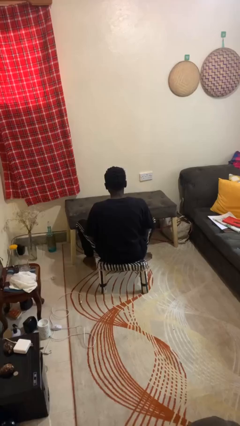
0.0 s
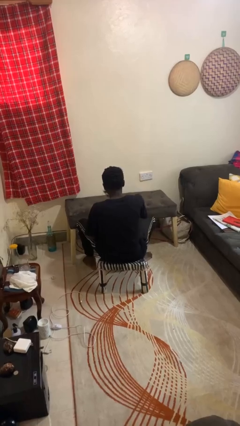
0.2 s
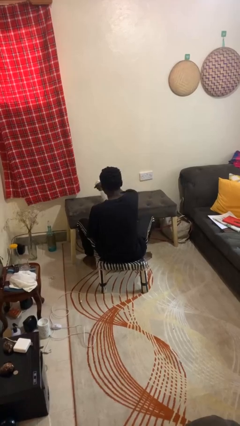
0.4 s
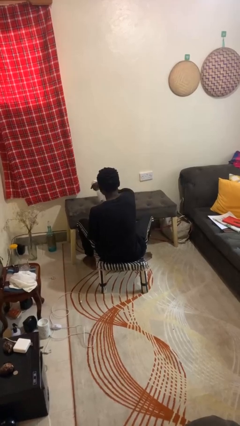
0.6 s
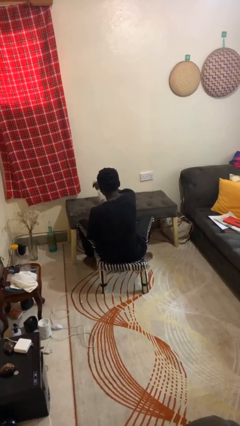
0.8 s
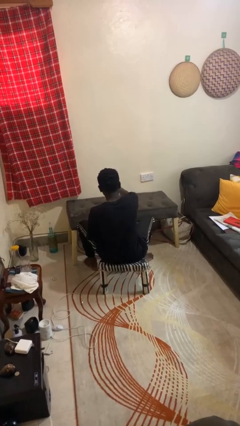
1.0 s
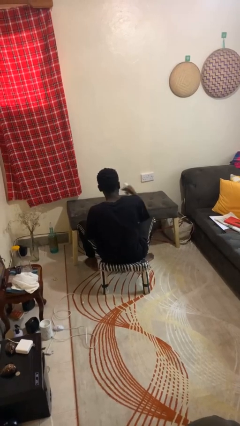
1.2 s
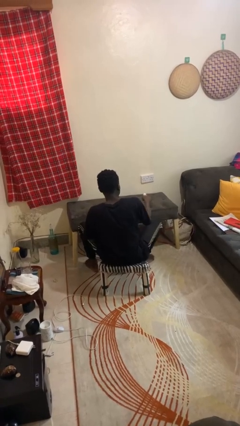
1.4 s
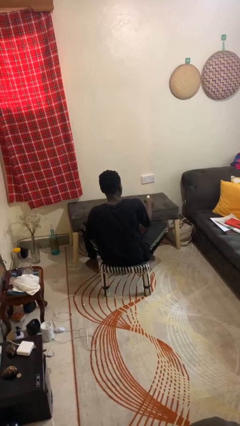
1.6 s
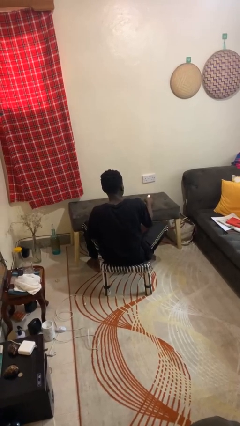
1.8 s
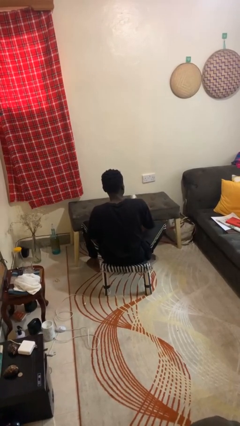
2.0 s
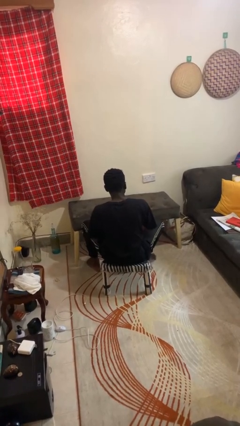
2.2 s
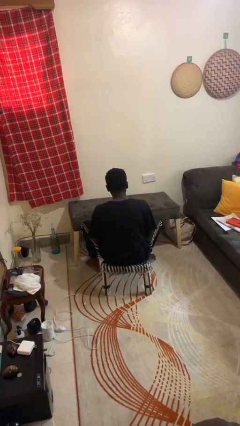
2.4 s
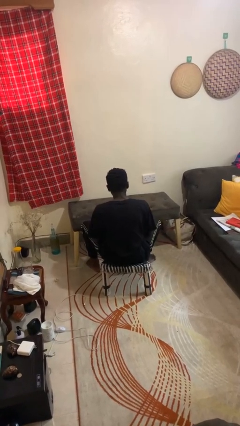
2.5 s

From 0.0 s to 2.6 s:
person sprays from bottle

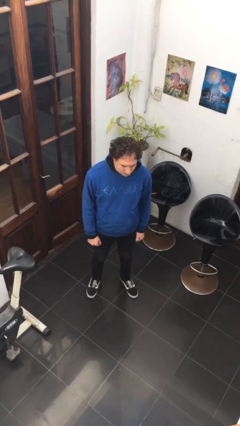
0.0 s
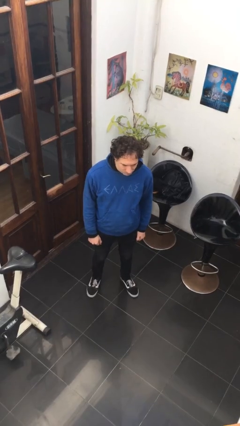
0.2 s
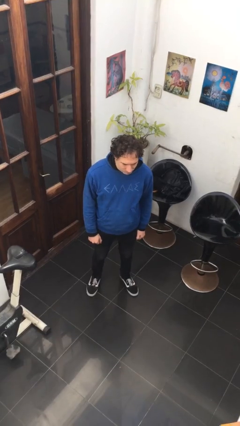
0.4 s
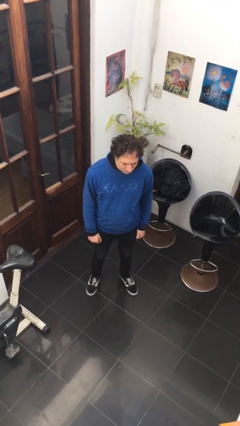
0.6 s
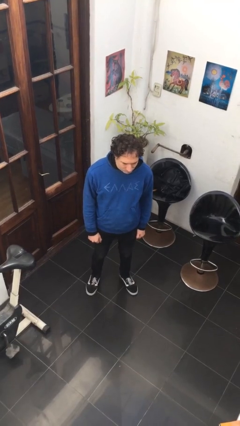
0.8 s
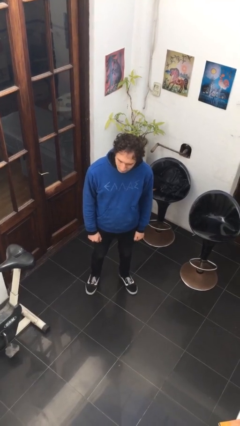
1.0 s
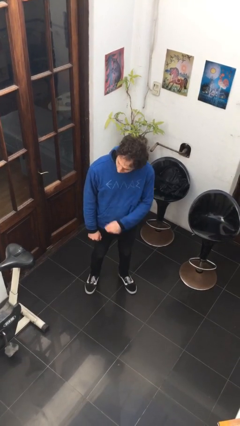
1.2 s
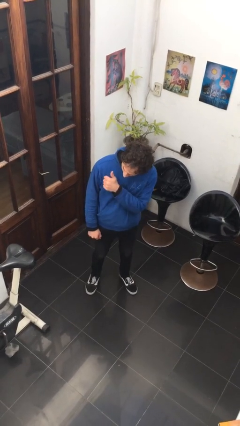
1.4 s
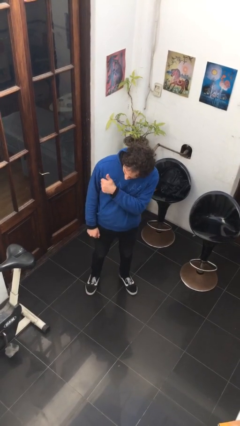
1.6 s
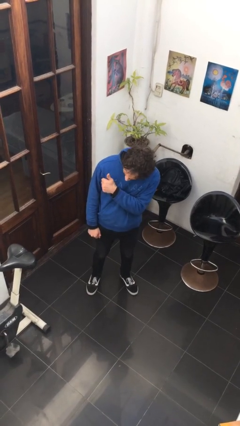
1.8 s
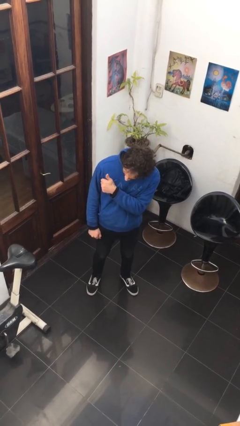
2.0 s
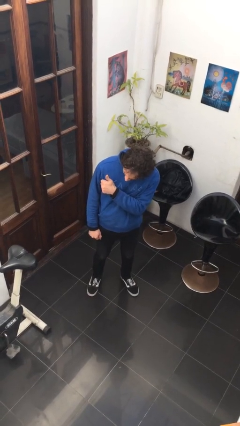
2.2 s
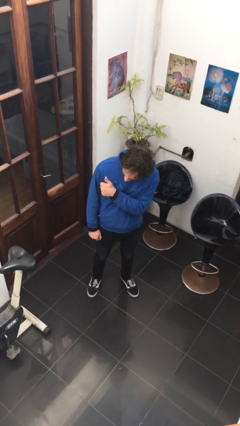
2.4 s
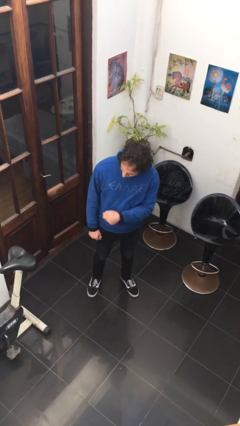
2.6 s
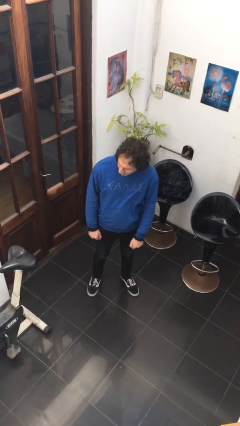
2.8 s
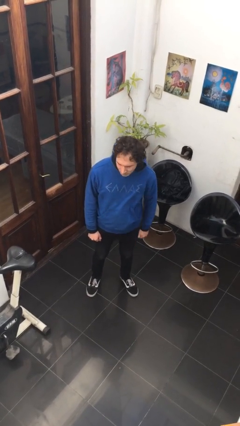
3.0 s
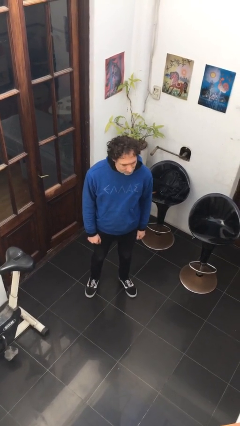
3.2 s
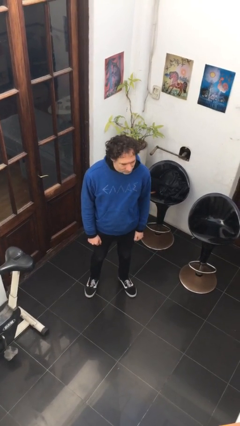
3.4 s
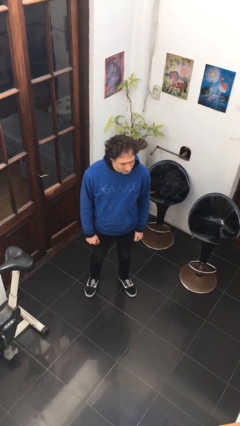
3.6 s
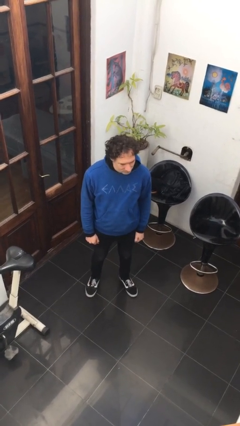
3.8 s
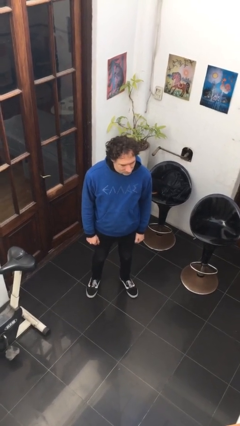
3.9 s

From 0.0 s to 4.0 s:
person gestures thumbs up

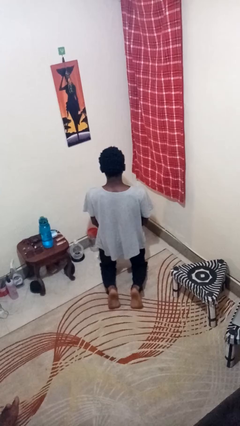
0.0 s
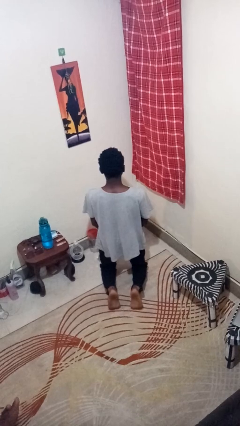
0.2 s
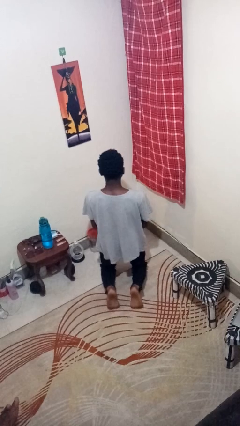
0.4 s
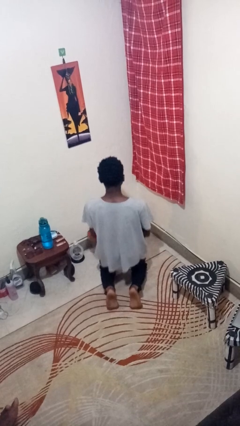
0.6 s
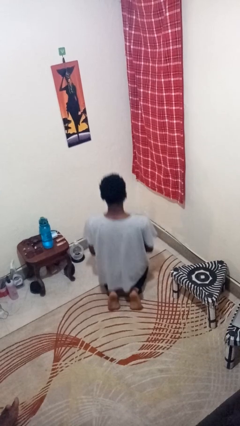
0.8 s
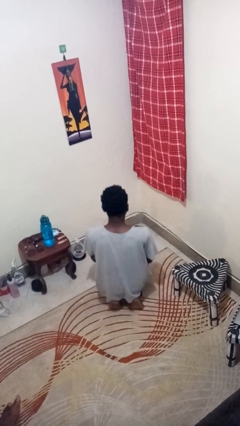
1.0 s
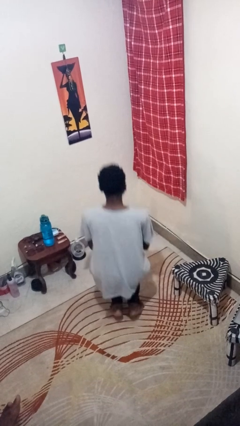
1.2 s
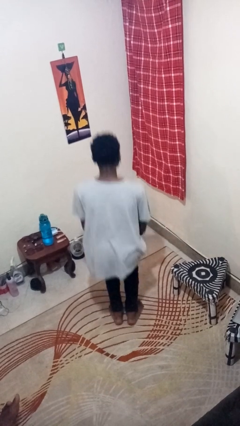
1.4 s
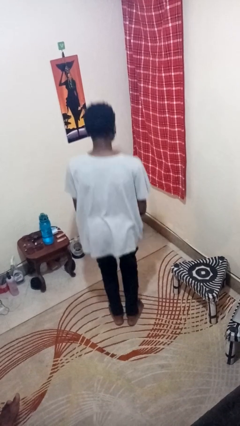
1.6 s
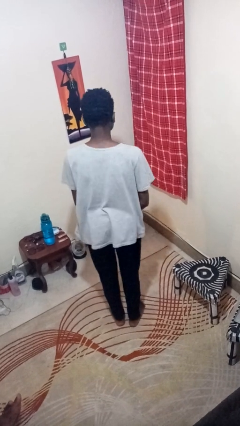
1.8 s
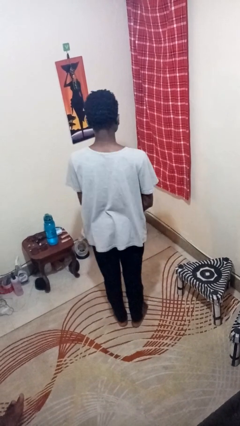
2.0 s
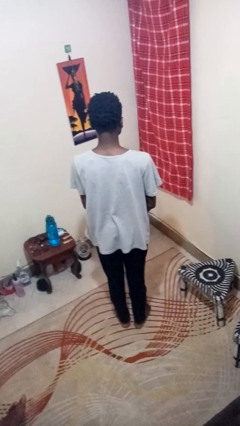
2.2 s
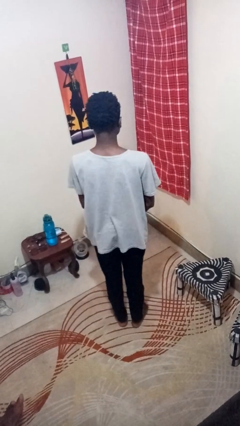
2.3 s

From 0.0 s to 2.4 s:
person stands up from floor

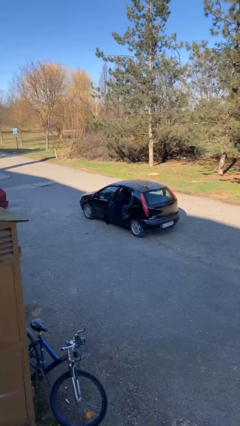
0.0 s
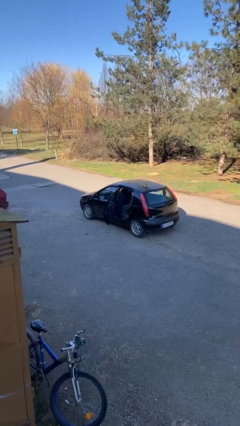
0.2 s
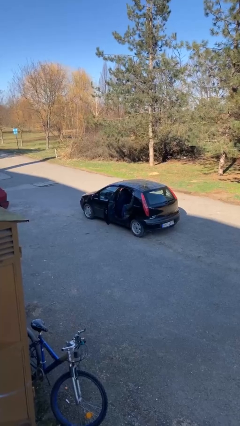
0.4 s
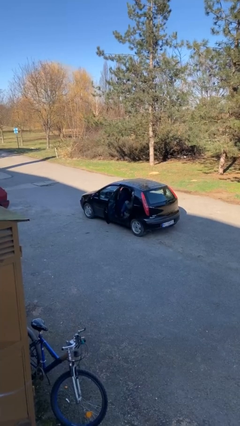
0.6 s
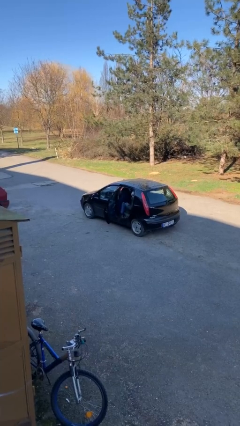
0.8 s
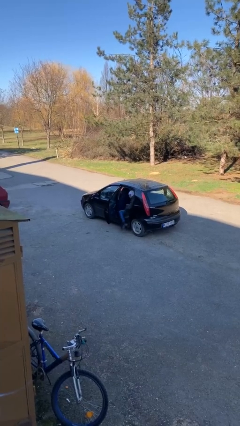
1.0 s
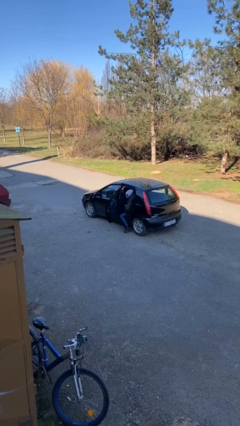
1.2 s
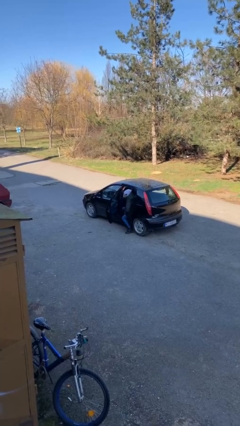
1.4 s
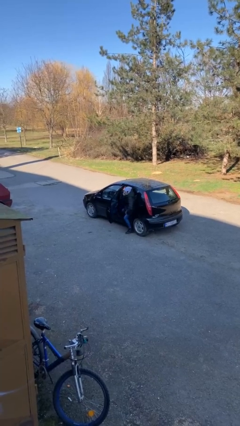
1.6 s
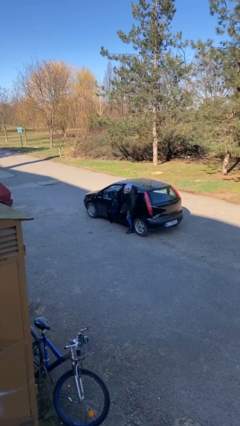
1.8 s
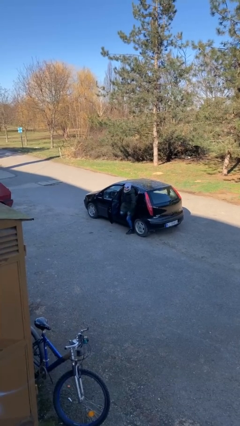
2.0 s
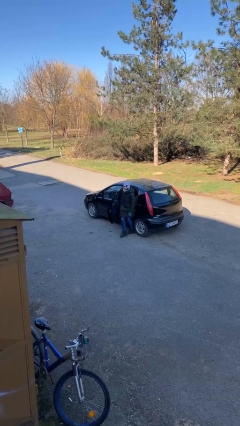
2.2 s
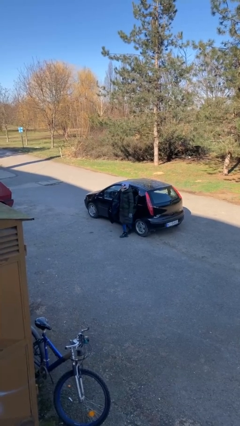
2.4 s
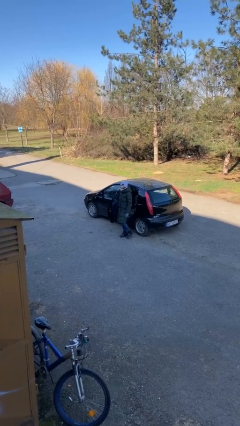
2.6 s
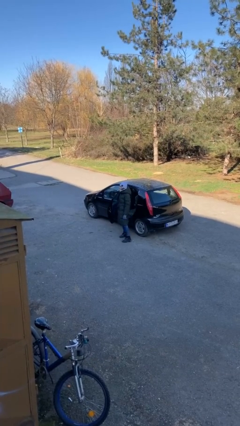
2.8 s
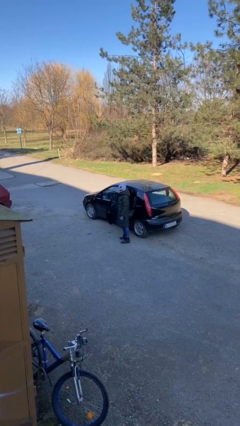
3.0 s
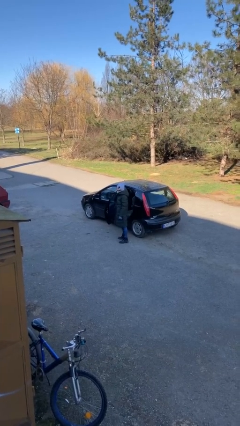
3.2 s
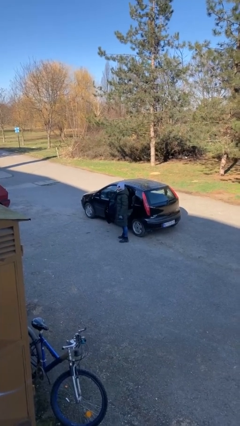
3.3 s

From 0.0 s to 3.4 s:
person exits car

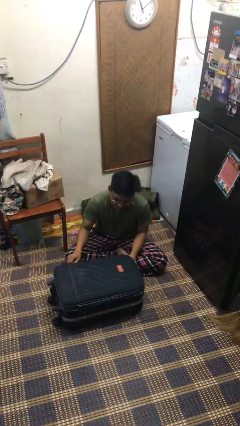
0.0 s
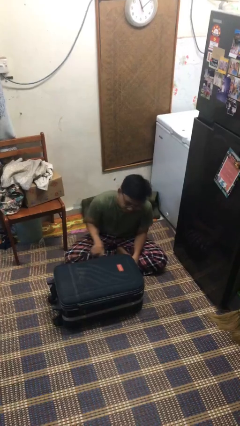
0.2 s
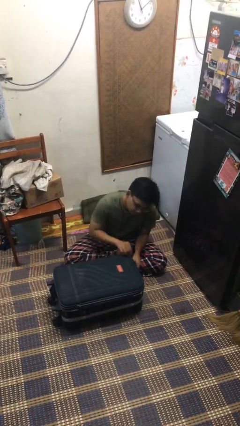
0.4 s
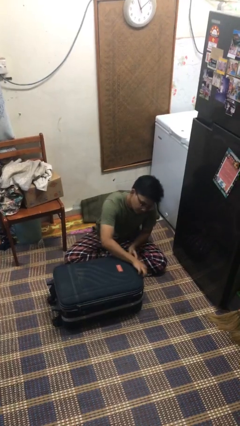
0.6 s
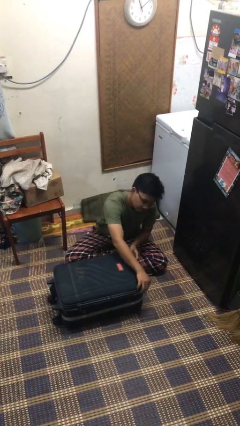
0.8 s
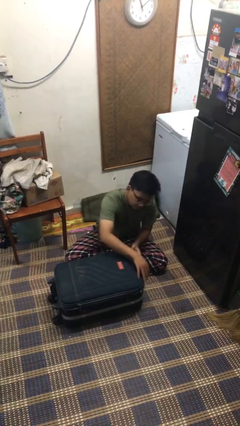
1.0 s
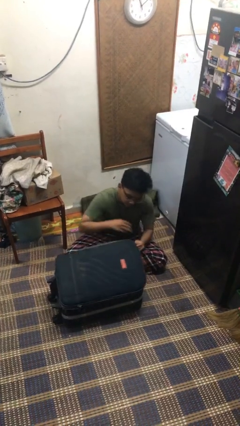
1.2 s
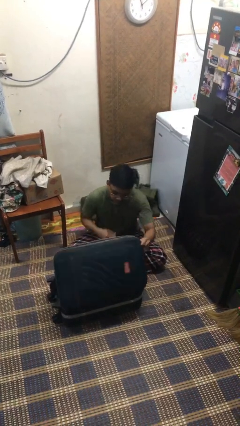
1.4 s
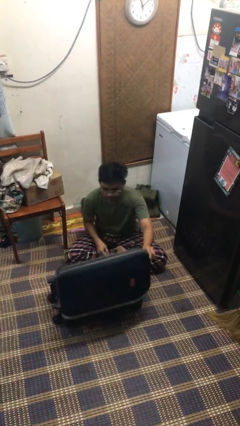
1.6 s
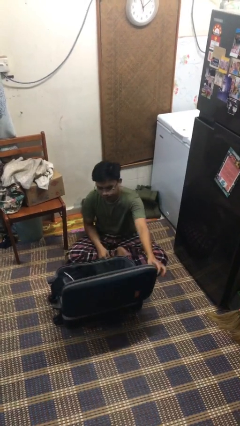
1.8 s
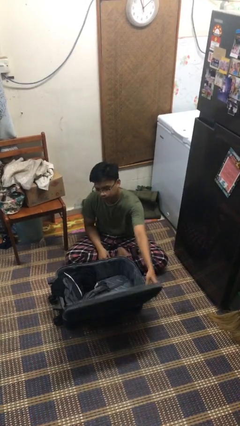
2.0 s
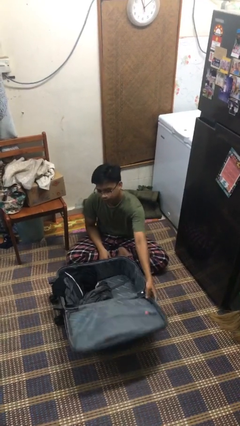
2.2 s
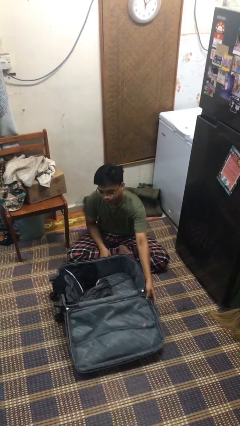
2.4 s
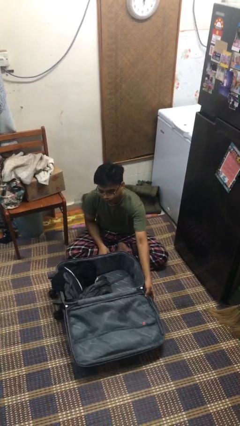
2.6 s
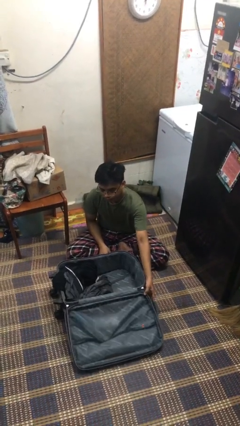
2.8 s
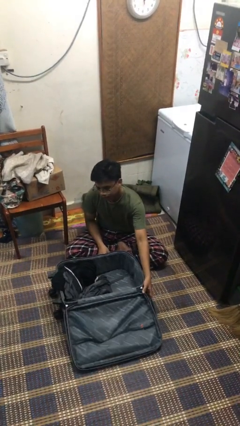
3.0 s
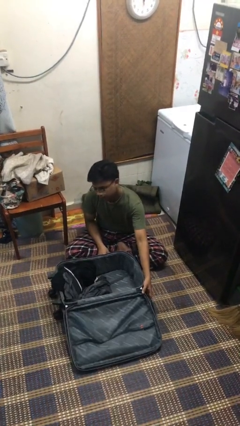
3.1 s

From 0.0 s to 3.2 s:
person opens suitcase

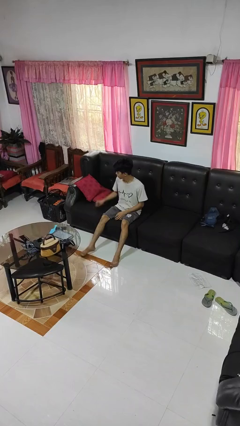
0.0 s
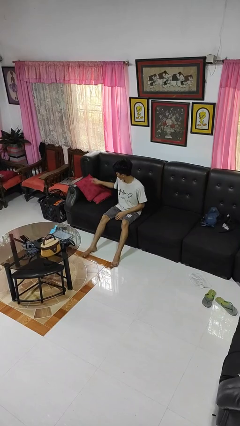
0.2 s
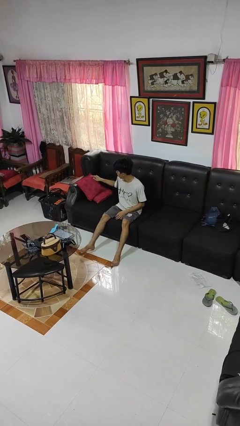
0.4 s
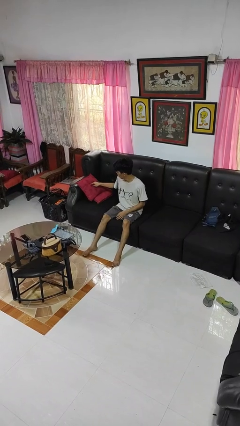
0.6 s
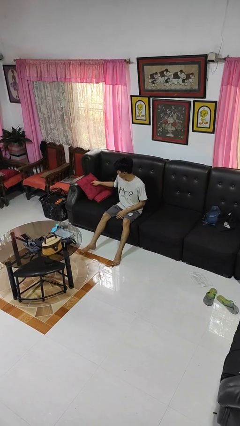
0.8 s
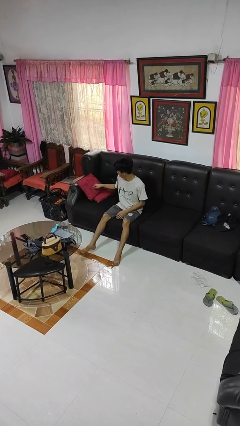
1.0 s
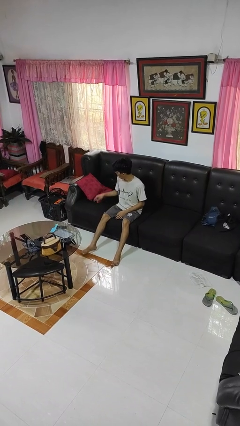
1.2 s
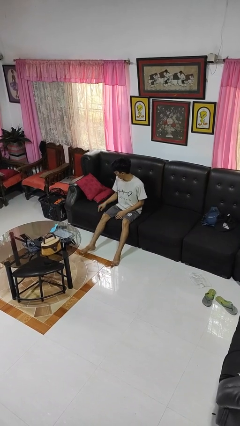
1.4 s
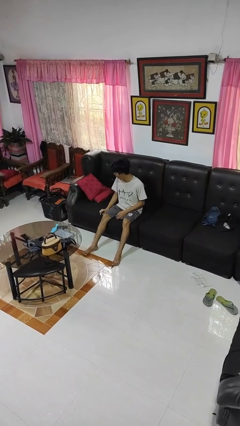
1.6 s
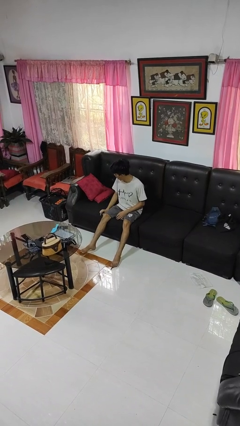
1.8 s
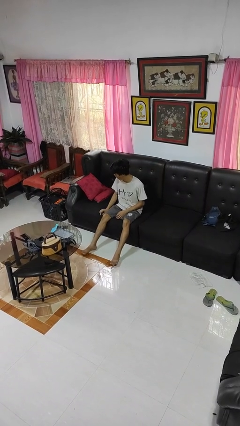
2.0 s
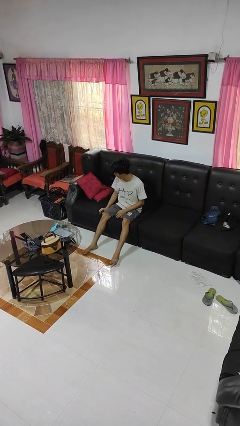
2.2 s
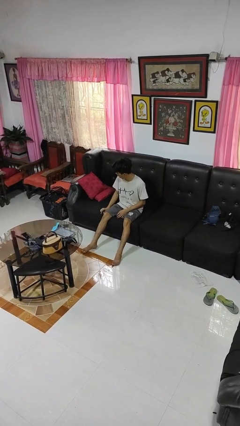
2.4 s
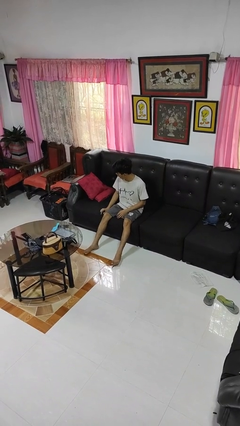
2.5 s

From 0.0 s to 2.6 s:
person taps object with finger
